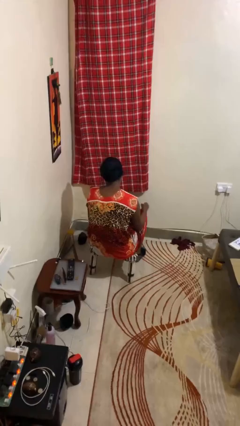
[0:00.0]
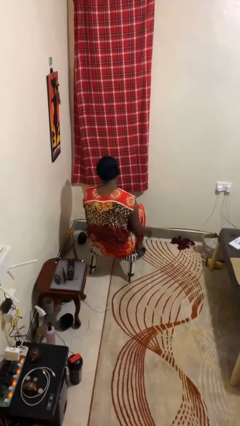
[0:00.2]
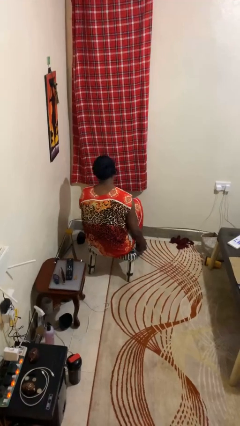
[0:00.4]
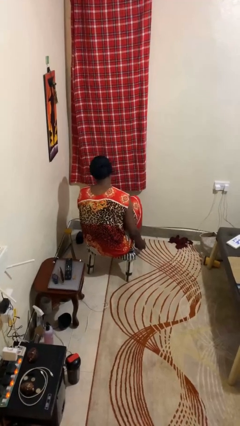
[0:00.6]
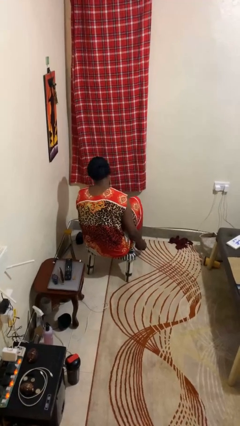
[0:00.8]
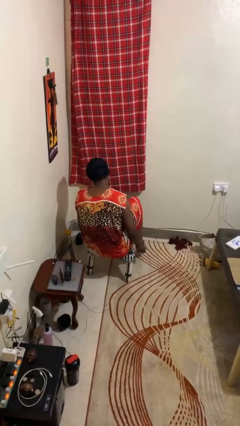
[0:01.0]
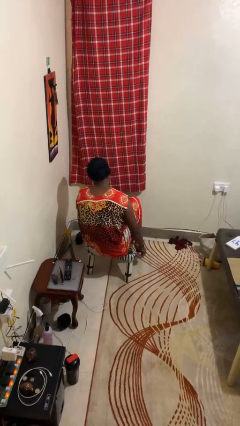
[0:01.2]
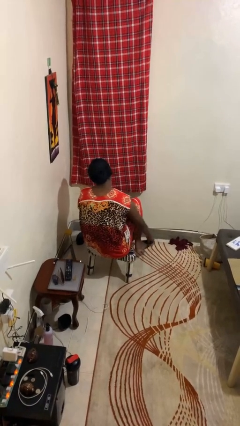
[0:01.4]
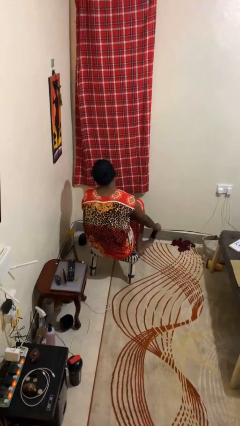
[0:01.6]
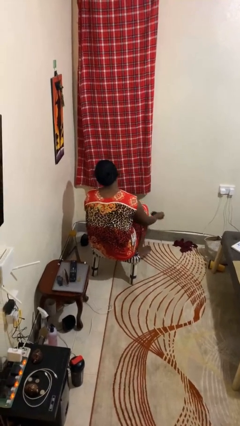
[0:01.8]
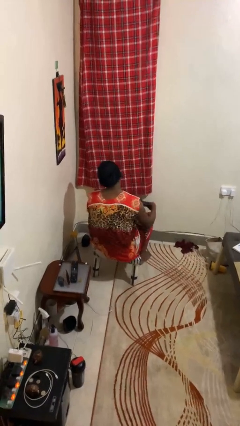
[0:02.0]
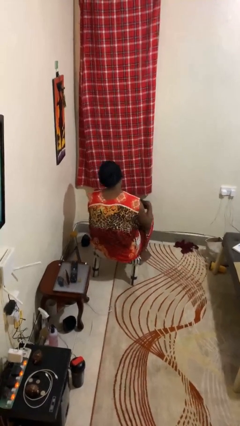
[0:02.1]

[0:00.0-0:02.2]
person takes off socks

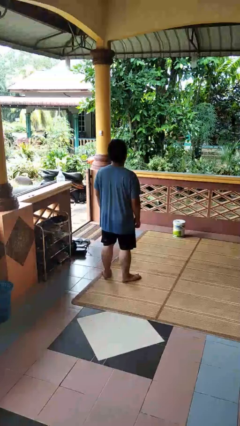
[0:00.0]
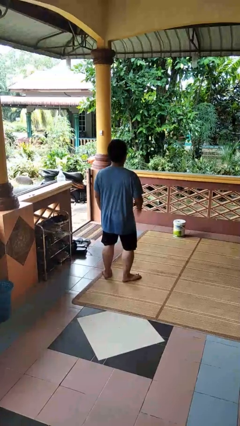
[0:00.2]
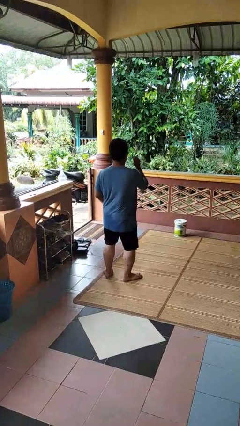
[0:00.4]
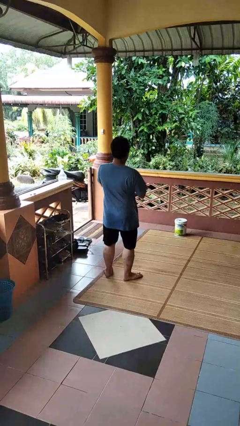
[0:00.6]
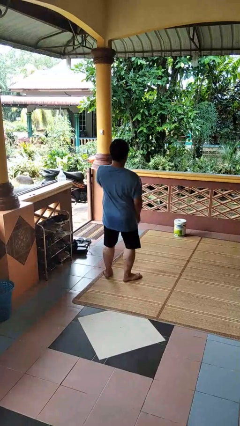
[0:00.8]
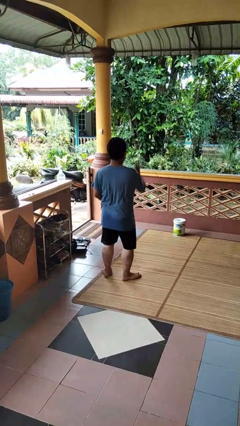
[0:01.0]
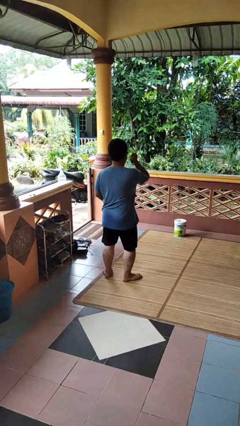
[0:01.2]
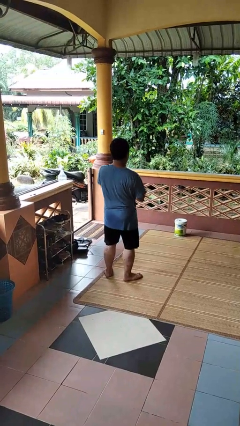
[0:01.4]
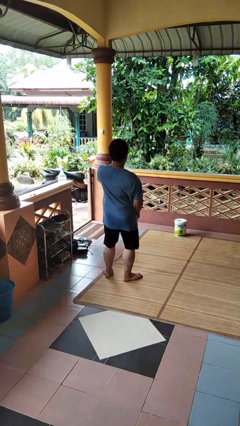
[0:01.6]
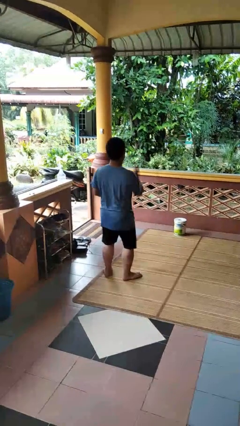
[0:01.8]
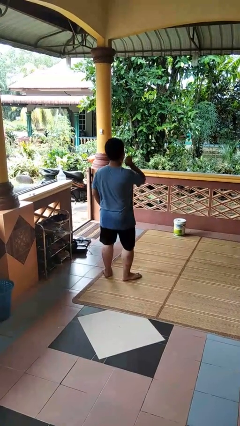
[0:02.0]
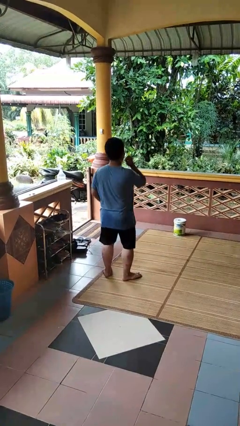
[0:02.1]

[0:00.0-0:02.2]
person dances in place

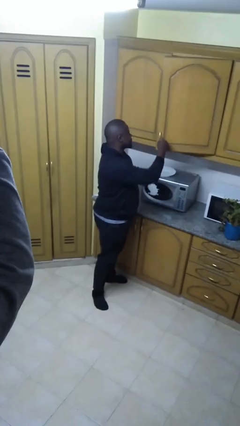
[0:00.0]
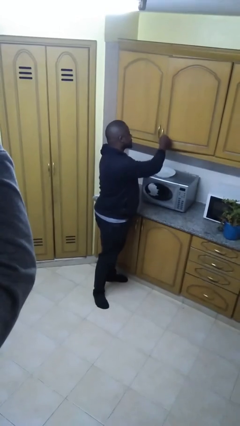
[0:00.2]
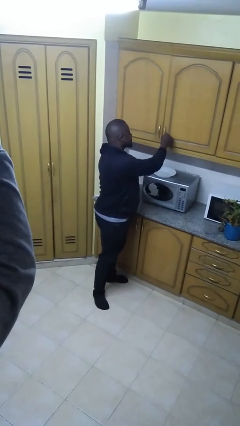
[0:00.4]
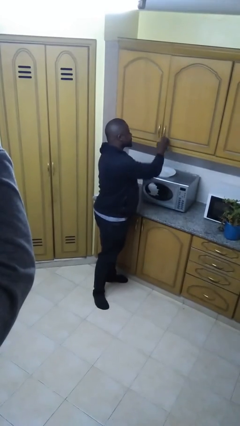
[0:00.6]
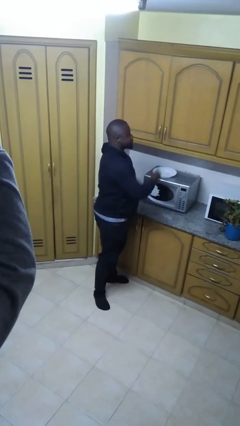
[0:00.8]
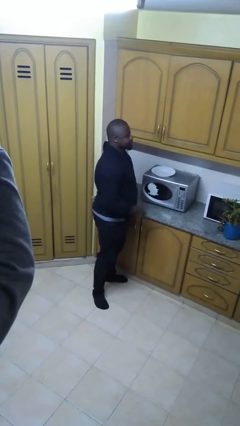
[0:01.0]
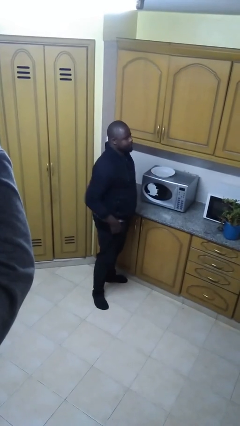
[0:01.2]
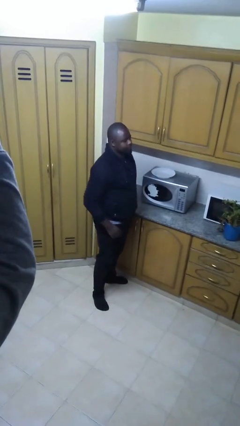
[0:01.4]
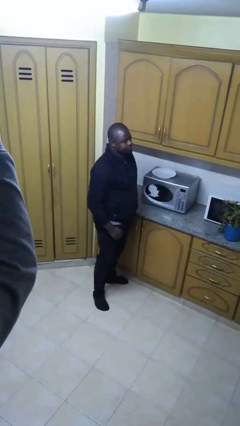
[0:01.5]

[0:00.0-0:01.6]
person closes cabinet

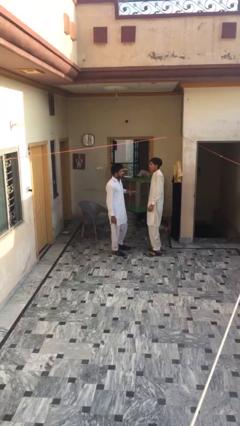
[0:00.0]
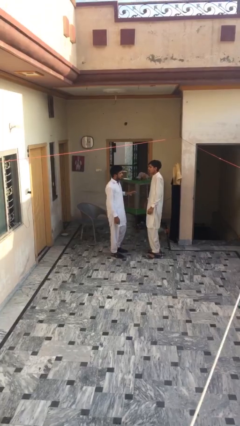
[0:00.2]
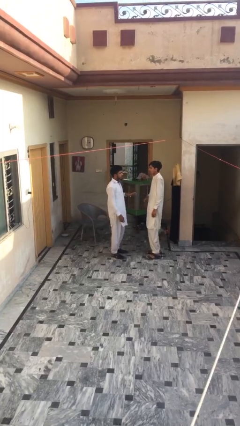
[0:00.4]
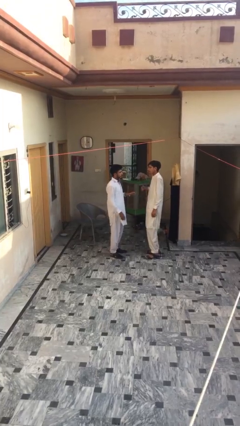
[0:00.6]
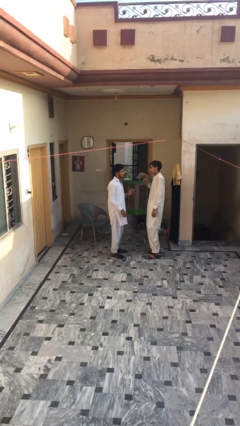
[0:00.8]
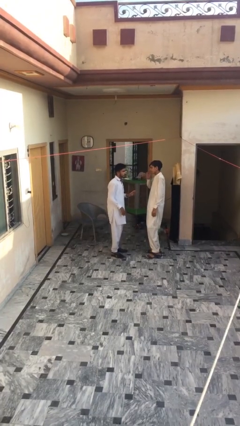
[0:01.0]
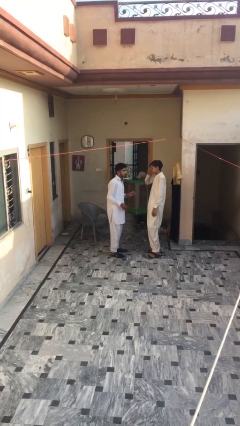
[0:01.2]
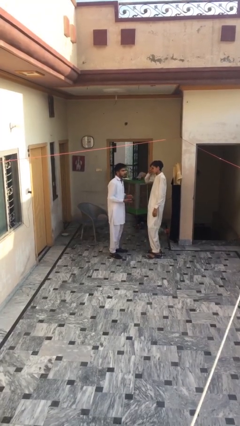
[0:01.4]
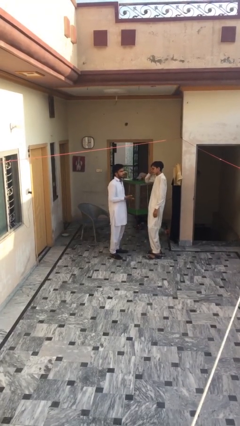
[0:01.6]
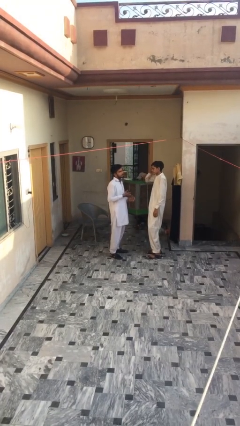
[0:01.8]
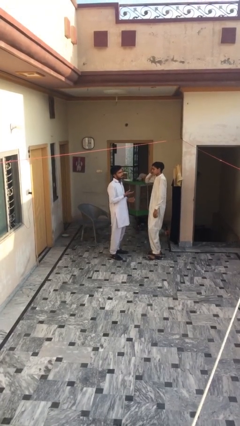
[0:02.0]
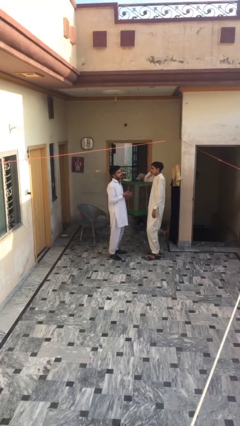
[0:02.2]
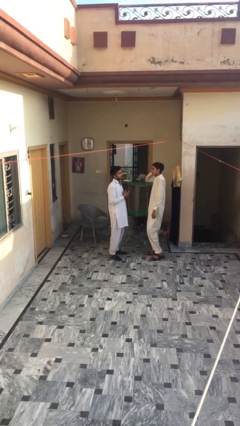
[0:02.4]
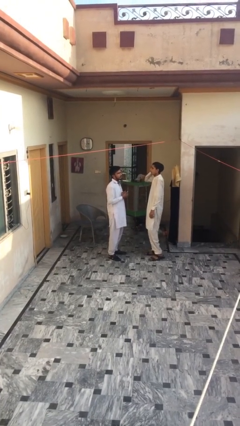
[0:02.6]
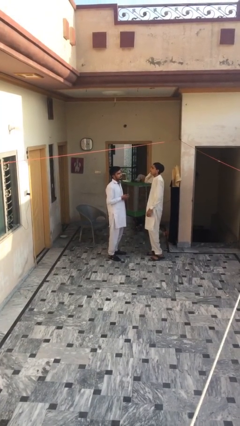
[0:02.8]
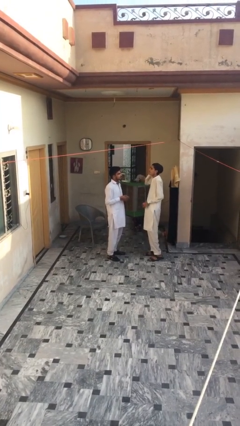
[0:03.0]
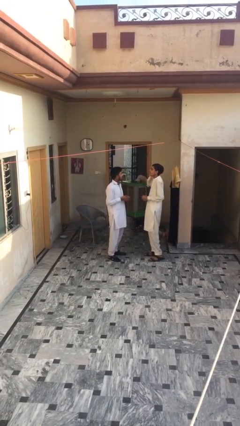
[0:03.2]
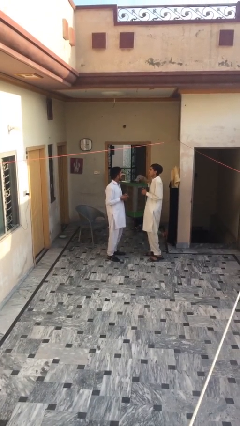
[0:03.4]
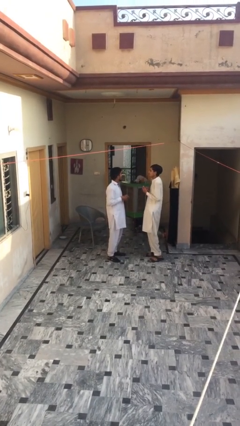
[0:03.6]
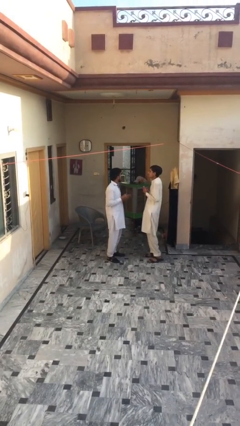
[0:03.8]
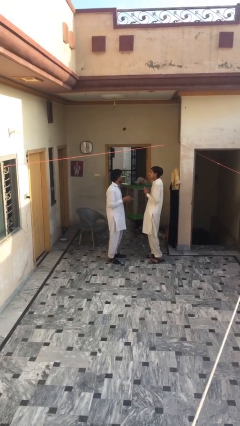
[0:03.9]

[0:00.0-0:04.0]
person talks to person

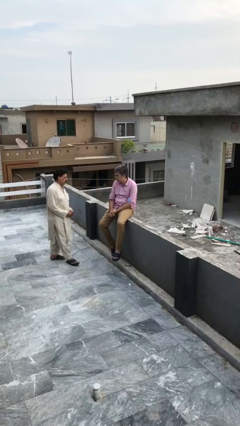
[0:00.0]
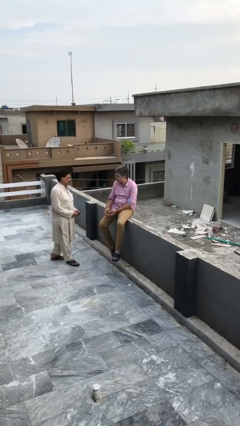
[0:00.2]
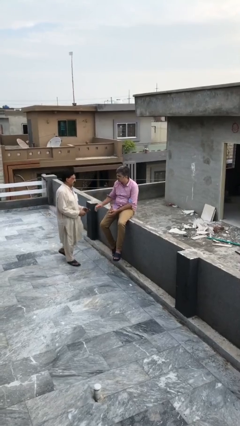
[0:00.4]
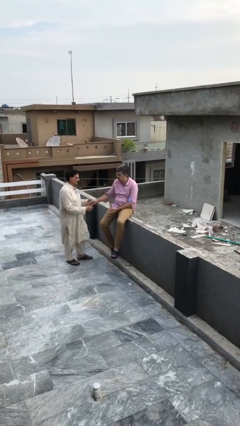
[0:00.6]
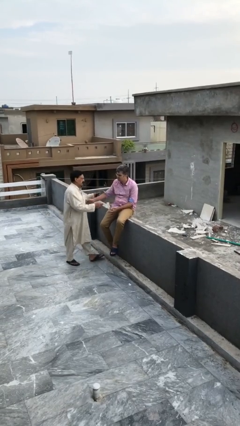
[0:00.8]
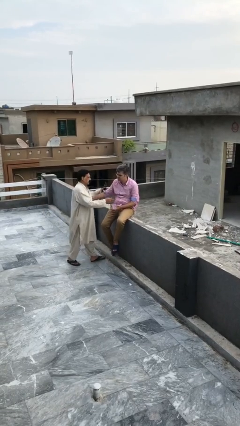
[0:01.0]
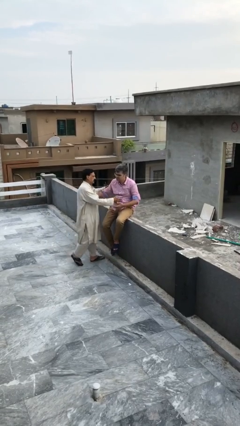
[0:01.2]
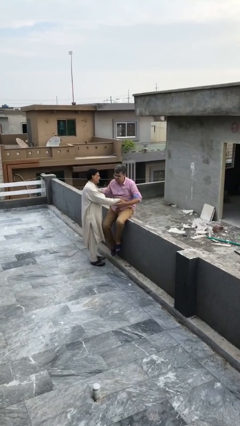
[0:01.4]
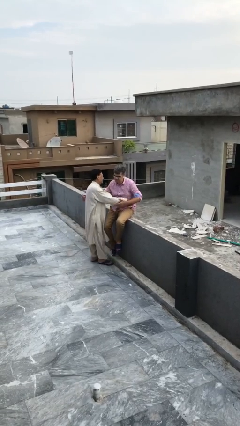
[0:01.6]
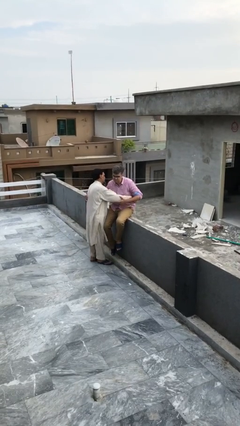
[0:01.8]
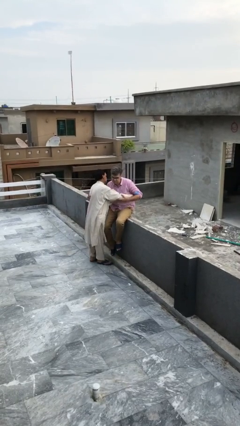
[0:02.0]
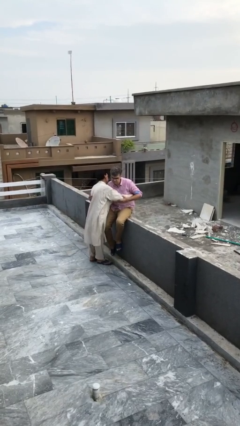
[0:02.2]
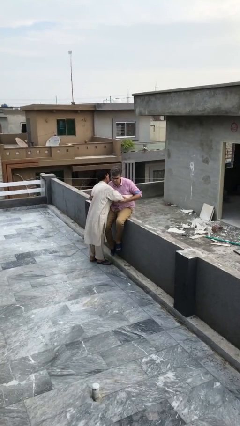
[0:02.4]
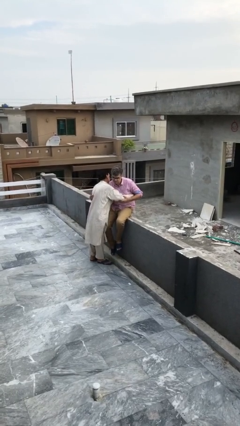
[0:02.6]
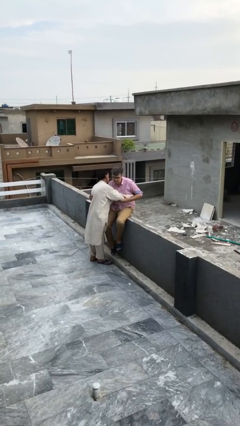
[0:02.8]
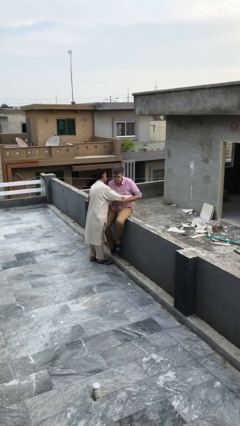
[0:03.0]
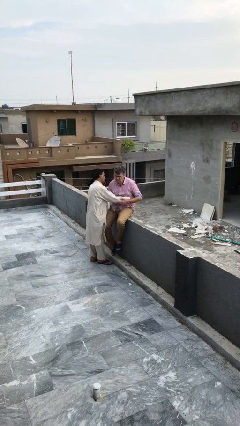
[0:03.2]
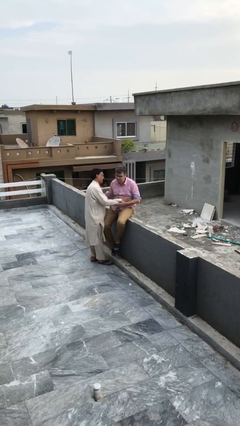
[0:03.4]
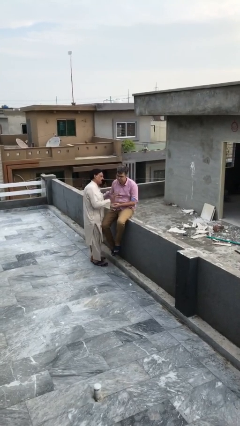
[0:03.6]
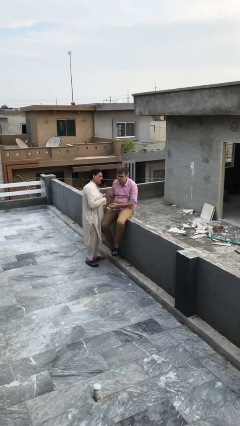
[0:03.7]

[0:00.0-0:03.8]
person embraces person

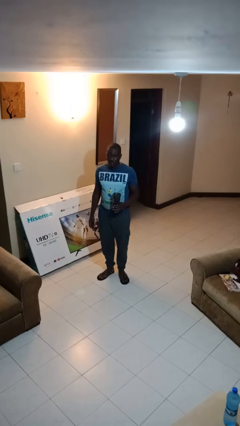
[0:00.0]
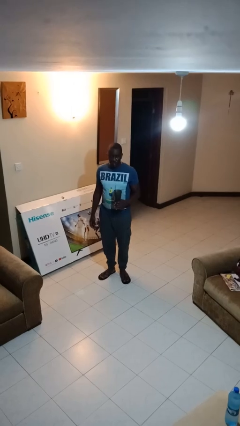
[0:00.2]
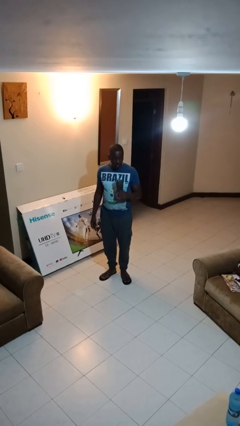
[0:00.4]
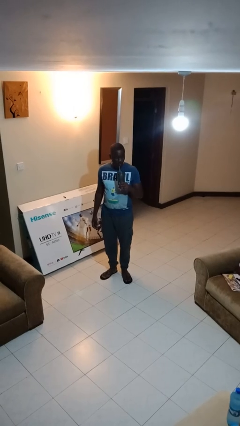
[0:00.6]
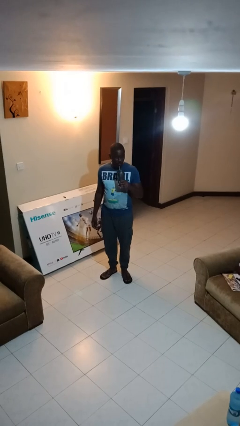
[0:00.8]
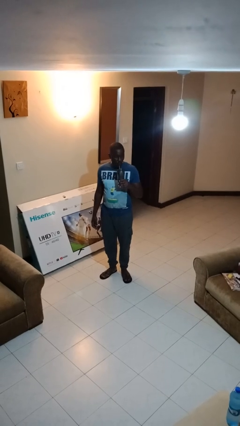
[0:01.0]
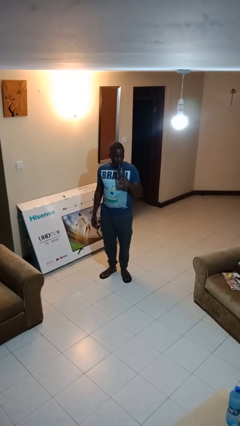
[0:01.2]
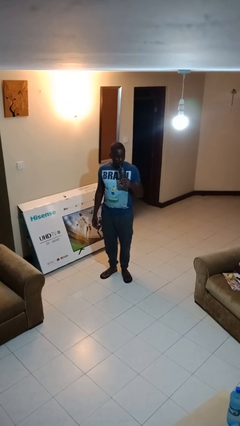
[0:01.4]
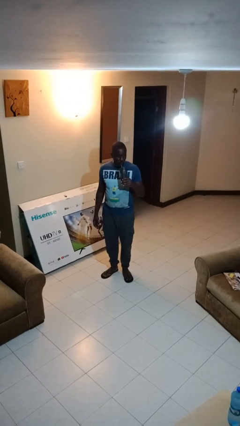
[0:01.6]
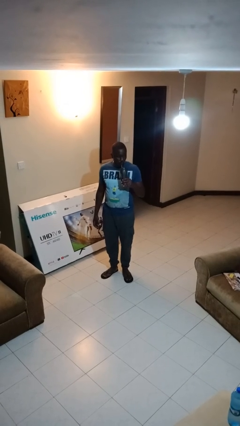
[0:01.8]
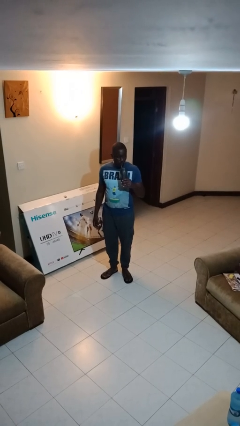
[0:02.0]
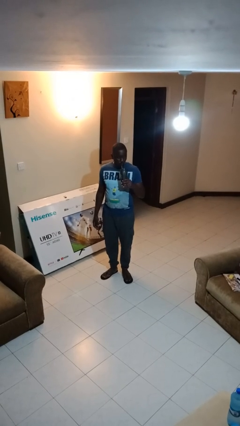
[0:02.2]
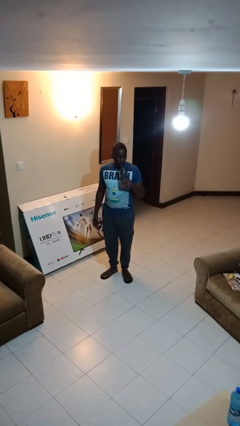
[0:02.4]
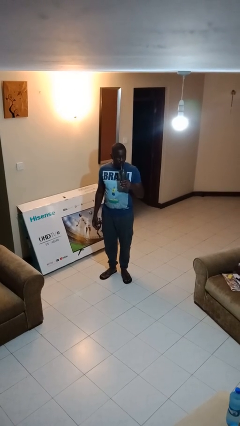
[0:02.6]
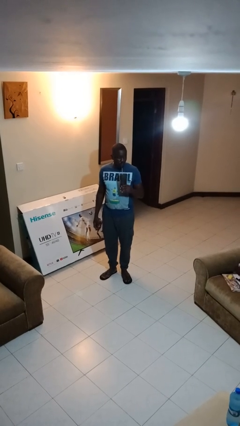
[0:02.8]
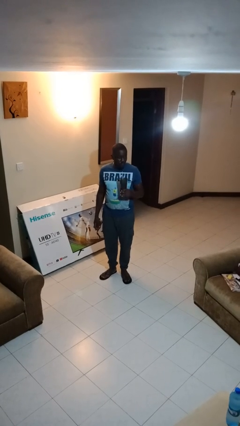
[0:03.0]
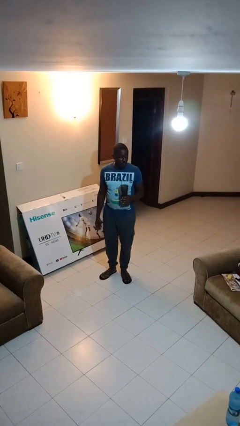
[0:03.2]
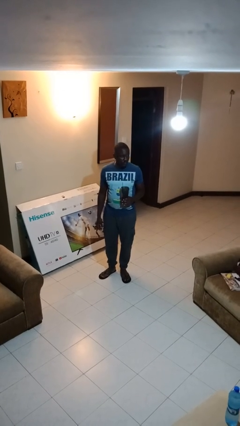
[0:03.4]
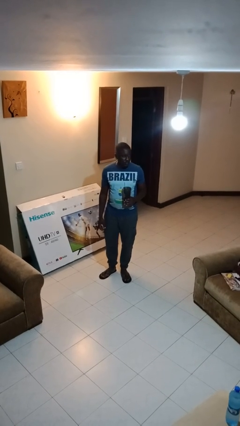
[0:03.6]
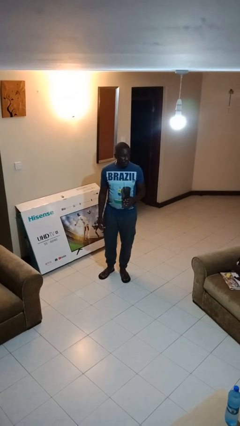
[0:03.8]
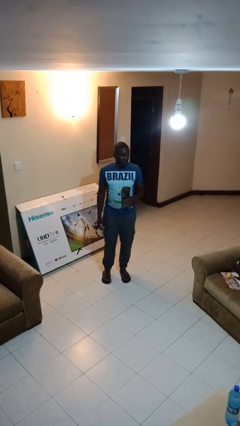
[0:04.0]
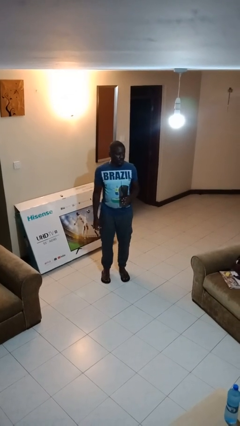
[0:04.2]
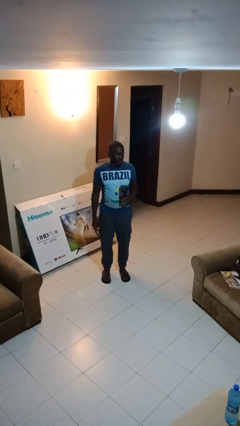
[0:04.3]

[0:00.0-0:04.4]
person drinks from straw
